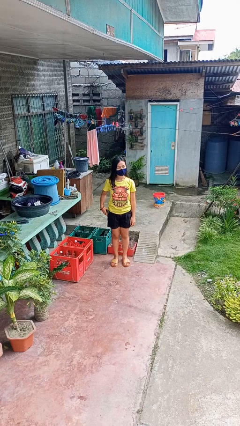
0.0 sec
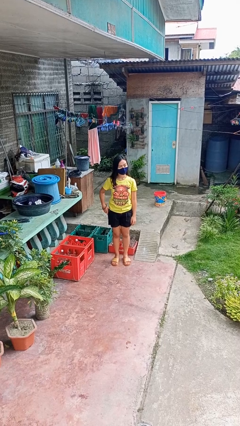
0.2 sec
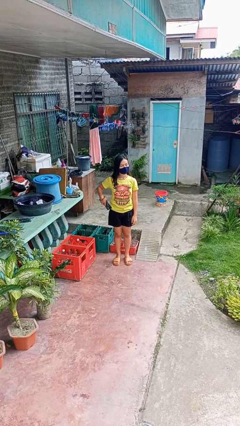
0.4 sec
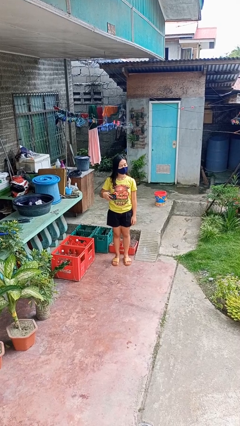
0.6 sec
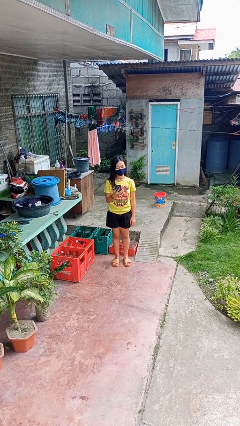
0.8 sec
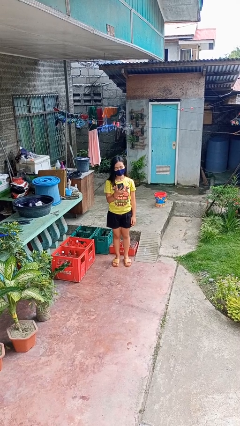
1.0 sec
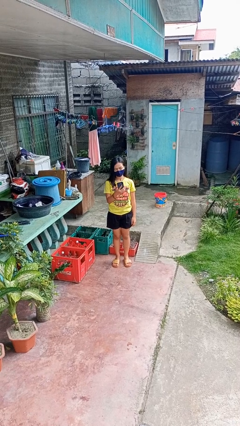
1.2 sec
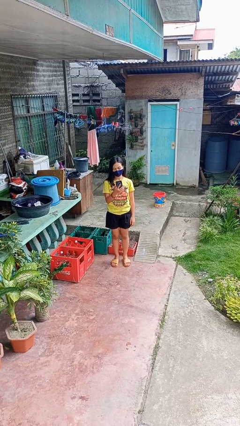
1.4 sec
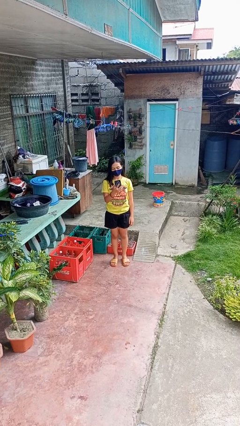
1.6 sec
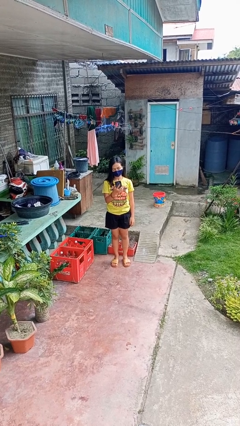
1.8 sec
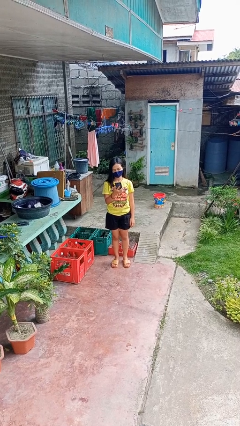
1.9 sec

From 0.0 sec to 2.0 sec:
person takes phone from pocket

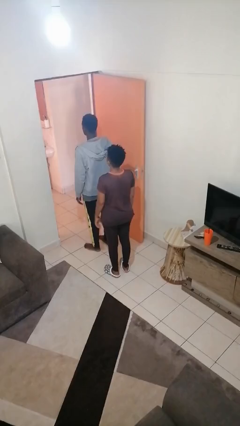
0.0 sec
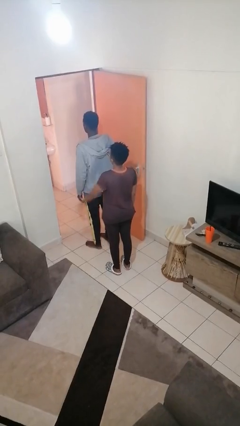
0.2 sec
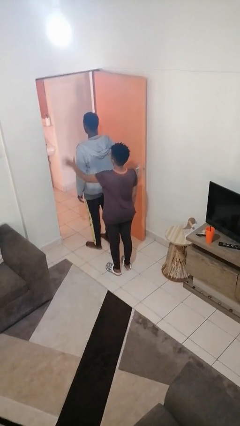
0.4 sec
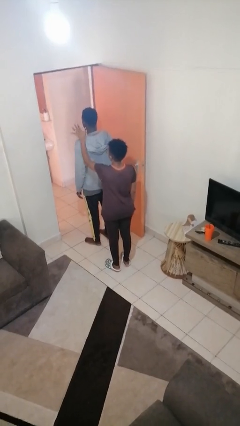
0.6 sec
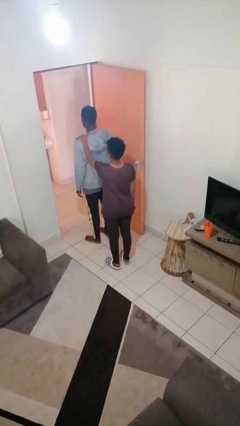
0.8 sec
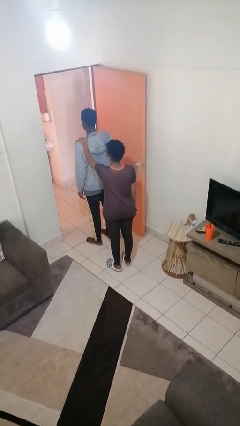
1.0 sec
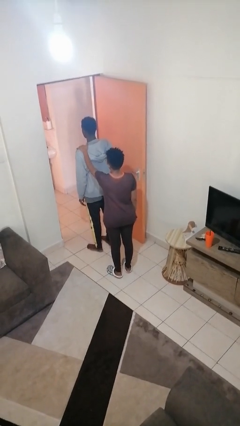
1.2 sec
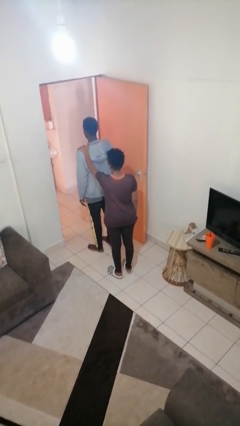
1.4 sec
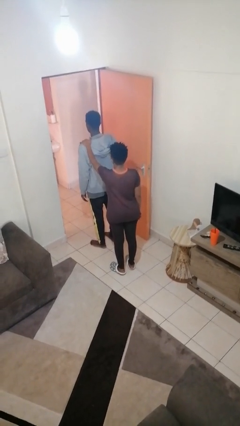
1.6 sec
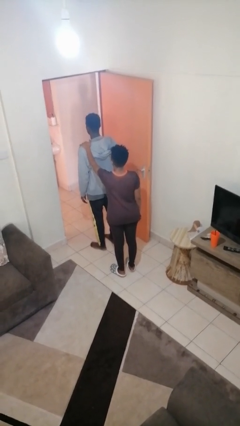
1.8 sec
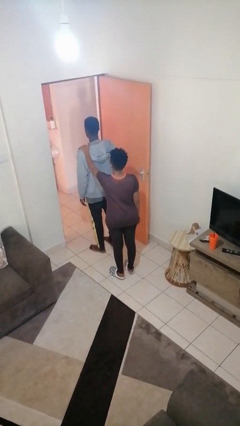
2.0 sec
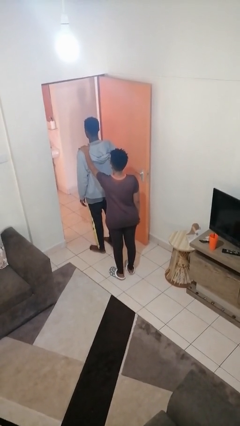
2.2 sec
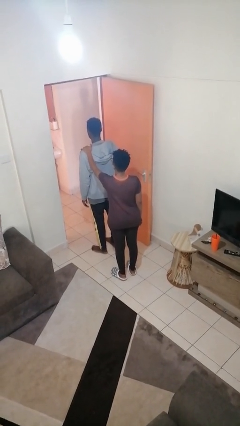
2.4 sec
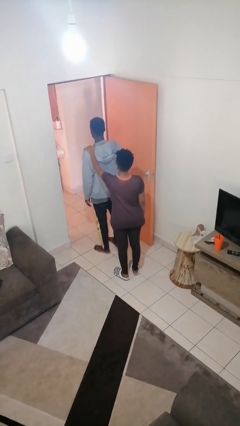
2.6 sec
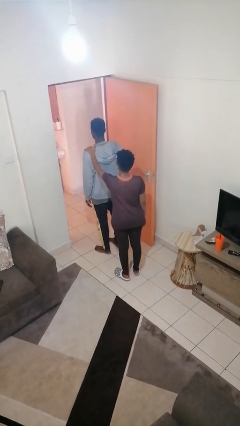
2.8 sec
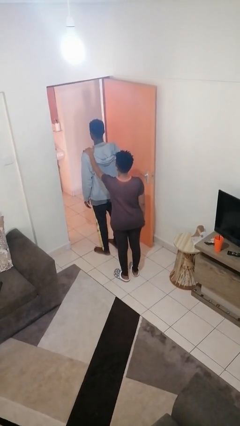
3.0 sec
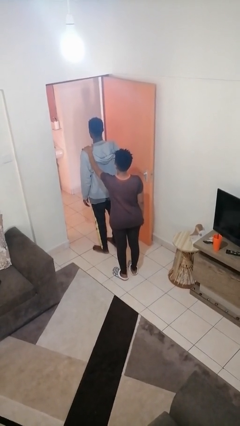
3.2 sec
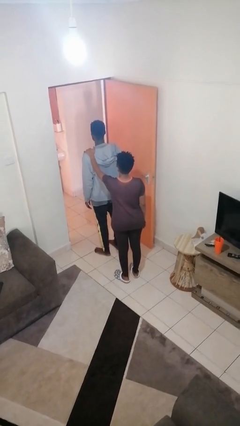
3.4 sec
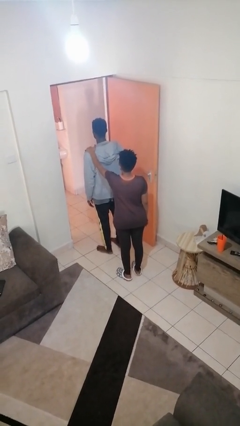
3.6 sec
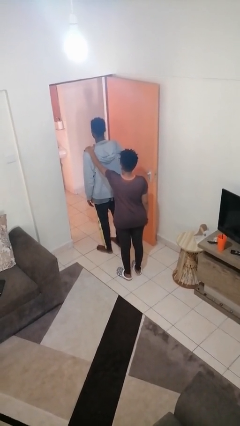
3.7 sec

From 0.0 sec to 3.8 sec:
person grabs person by shoulder

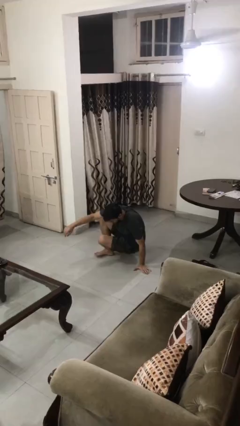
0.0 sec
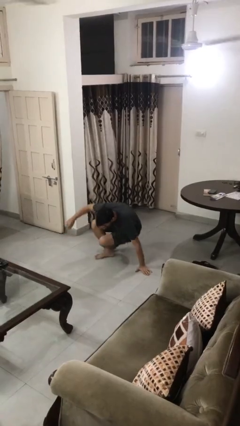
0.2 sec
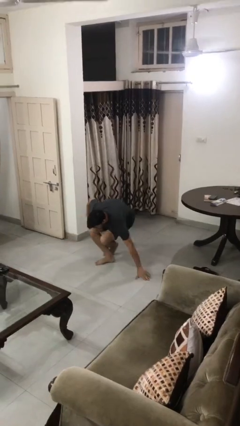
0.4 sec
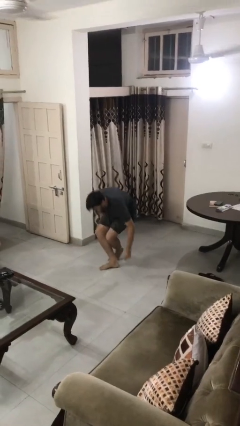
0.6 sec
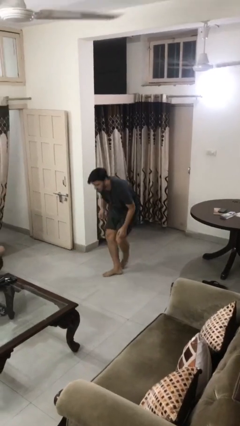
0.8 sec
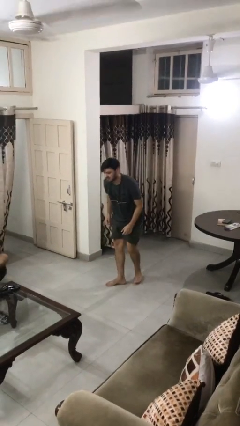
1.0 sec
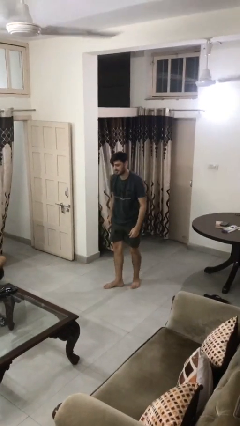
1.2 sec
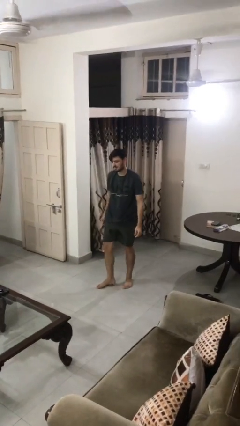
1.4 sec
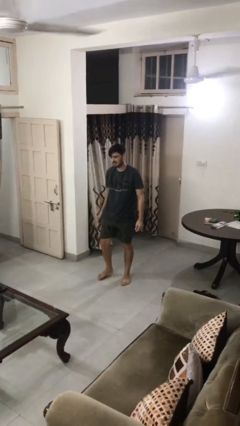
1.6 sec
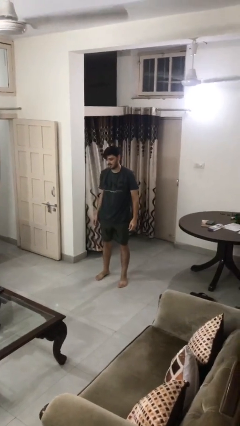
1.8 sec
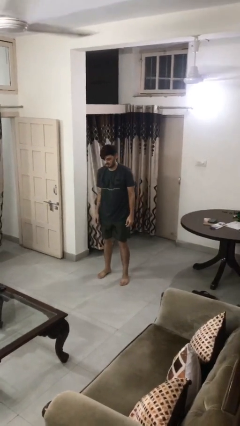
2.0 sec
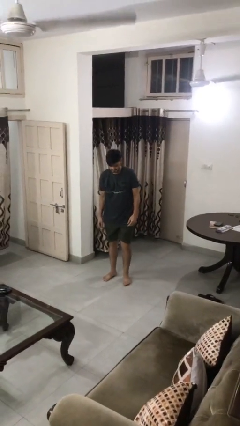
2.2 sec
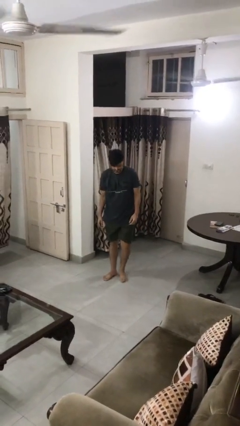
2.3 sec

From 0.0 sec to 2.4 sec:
person stands up from floor

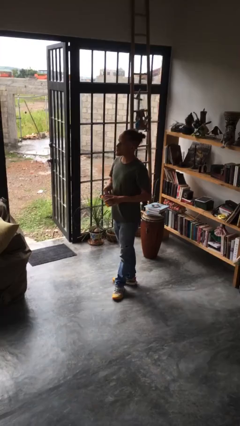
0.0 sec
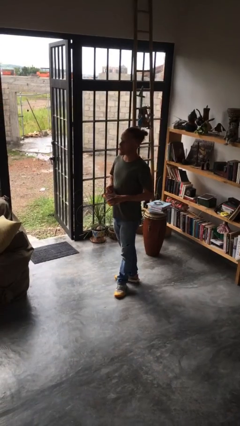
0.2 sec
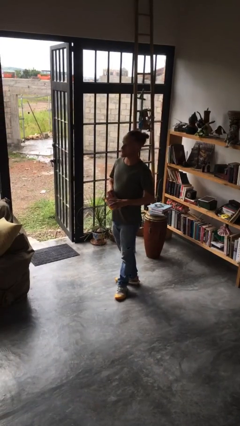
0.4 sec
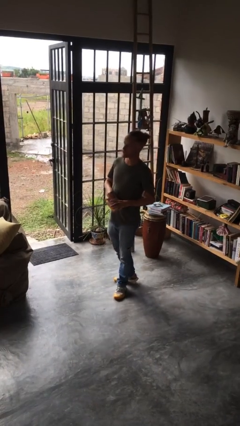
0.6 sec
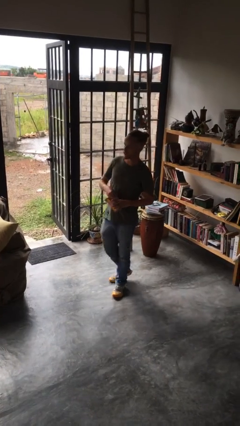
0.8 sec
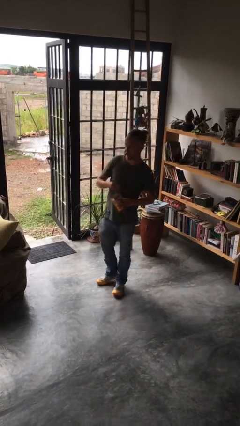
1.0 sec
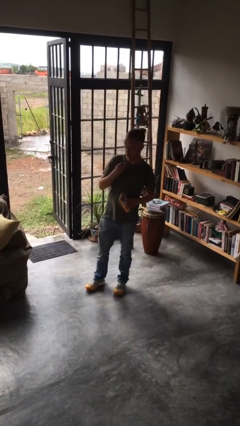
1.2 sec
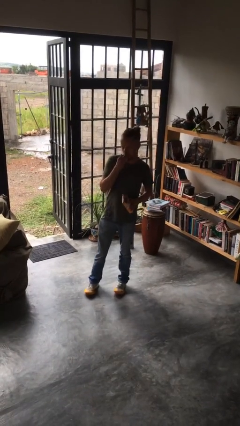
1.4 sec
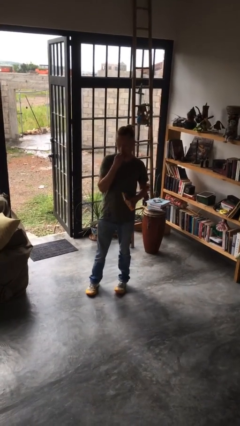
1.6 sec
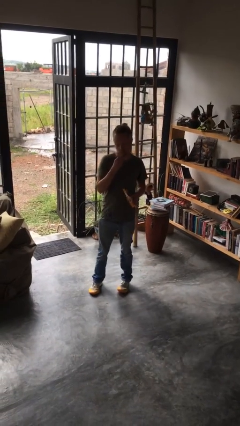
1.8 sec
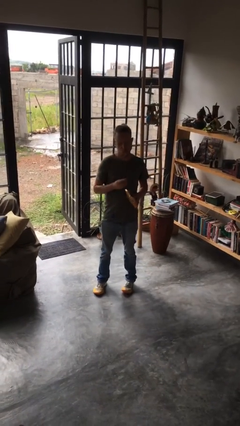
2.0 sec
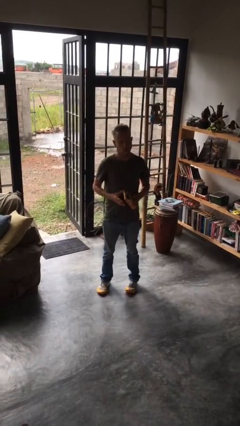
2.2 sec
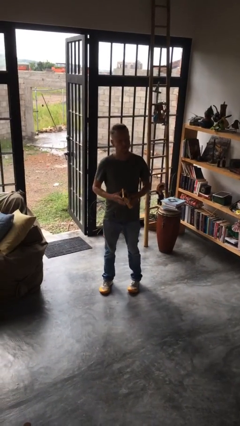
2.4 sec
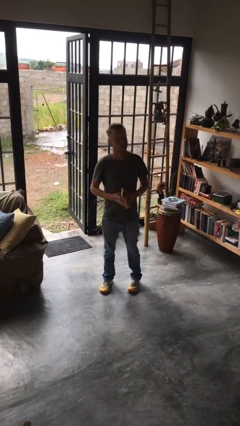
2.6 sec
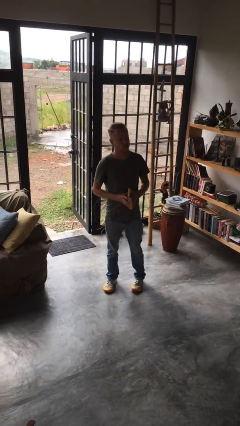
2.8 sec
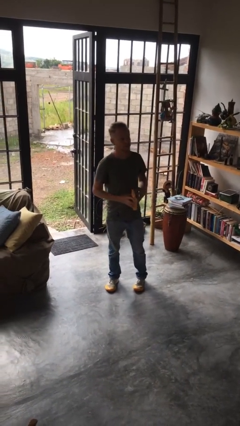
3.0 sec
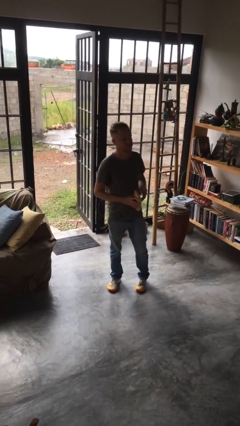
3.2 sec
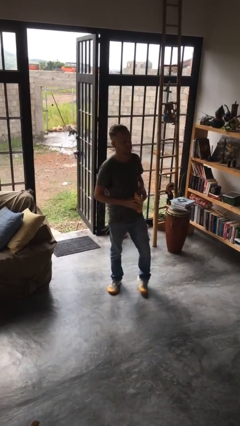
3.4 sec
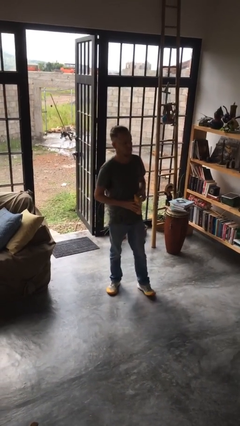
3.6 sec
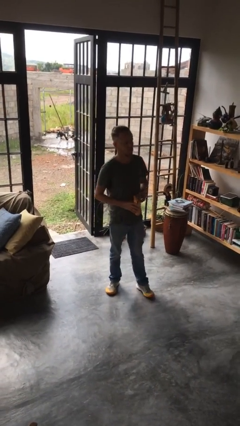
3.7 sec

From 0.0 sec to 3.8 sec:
person eats snack from bag

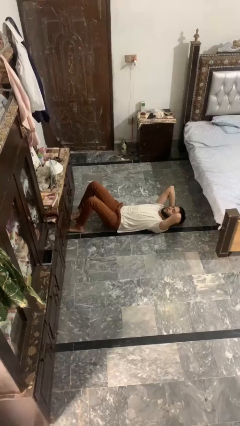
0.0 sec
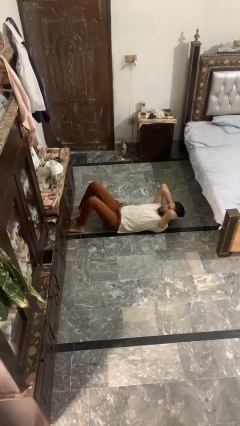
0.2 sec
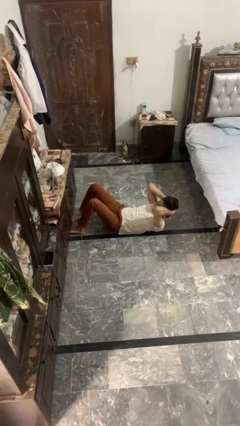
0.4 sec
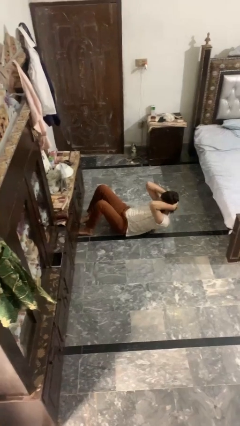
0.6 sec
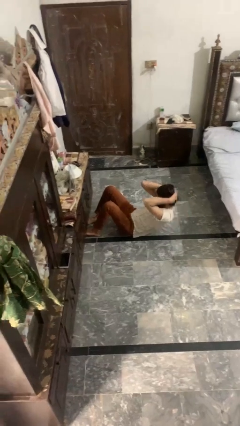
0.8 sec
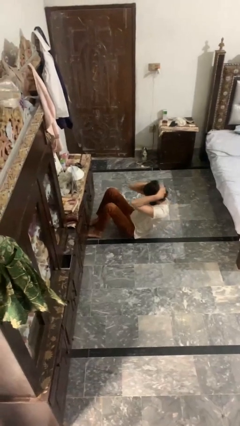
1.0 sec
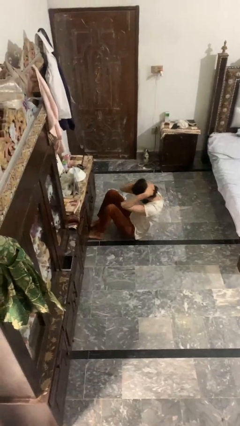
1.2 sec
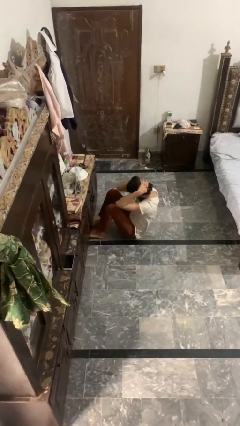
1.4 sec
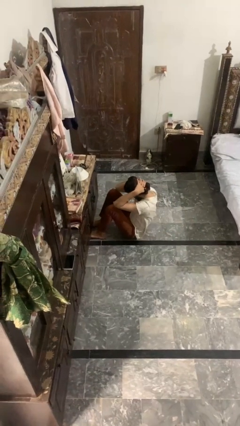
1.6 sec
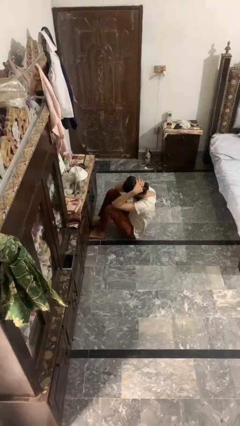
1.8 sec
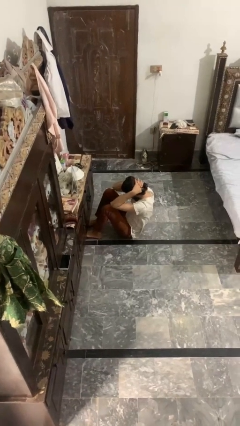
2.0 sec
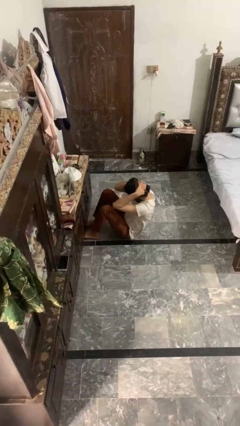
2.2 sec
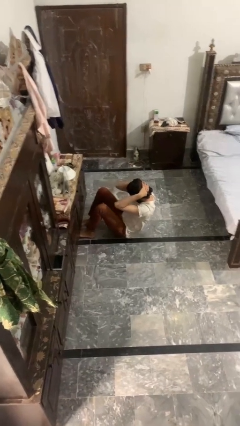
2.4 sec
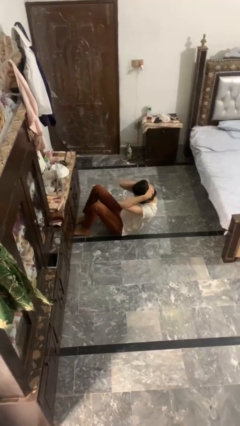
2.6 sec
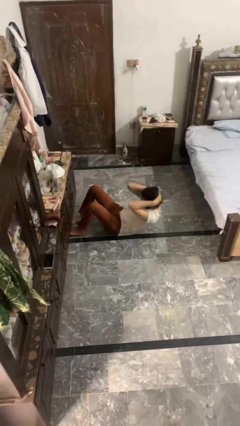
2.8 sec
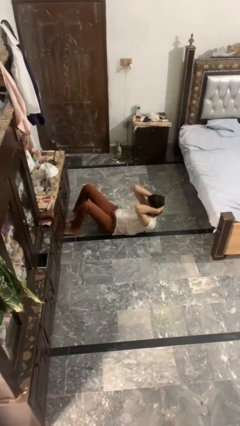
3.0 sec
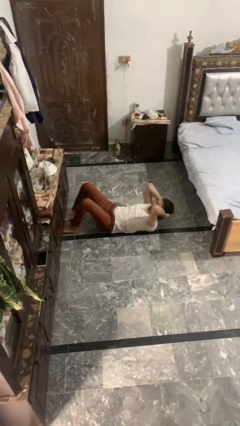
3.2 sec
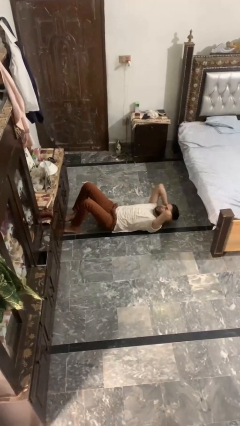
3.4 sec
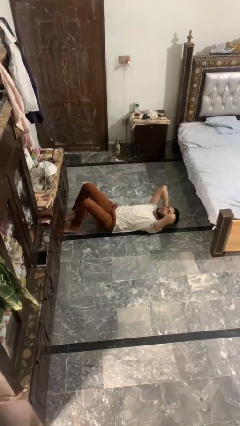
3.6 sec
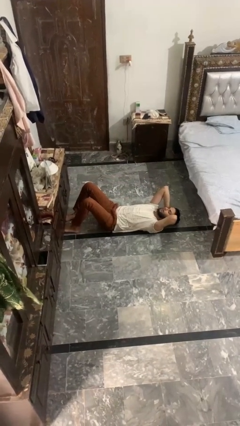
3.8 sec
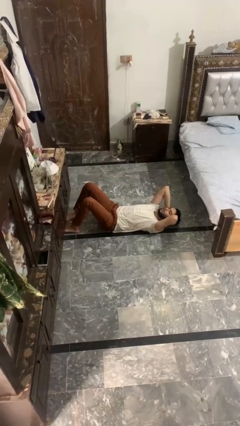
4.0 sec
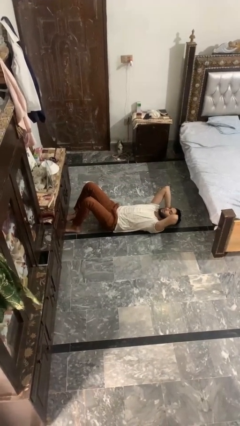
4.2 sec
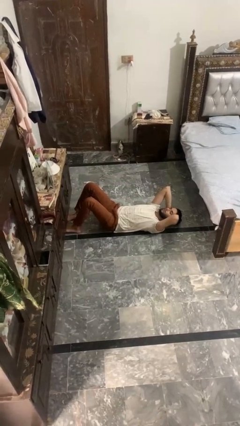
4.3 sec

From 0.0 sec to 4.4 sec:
person exercises with situp

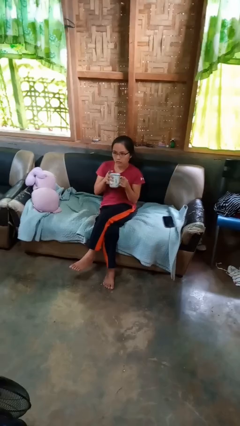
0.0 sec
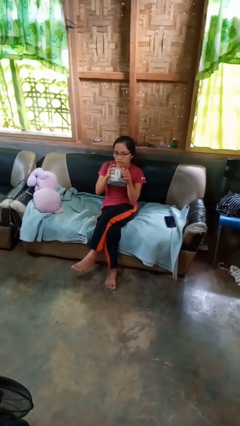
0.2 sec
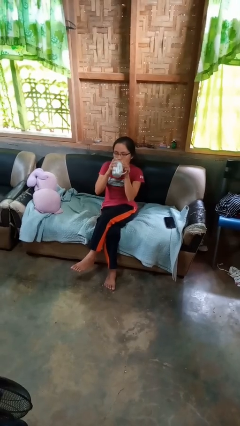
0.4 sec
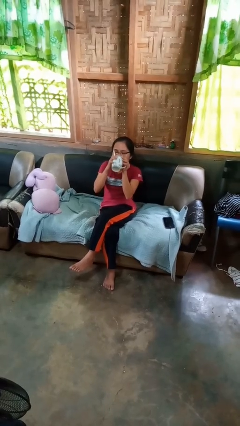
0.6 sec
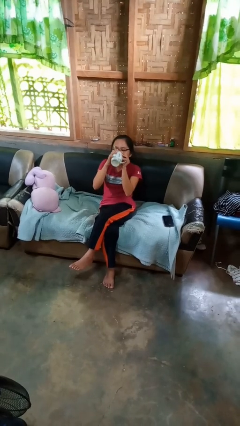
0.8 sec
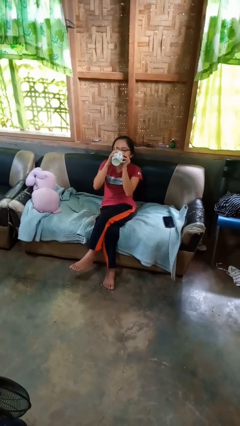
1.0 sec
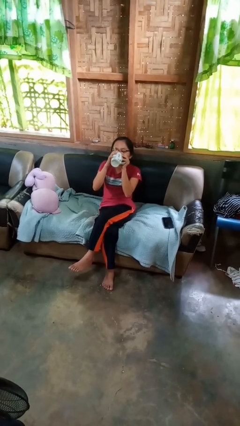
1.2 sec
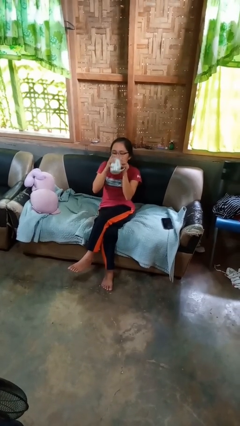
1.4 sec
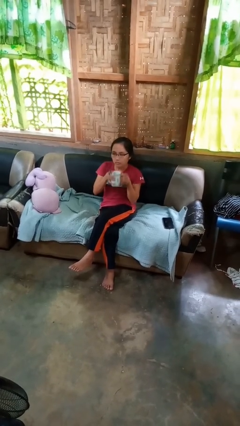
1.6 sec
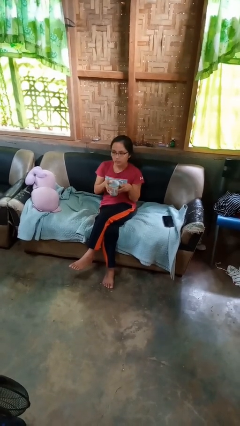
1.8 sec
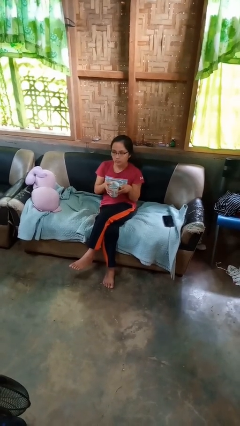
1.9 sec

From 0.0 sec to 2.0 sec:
person drinks from mug
